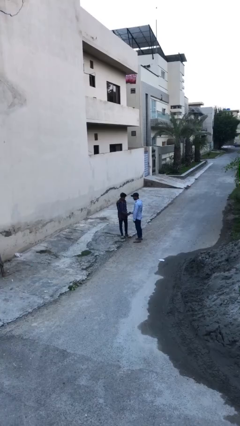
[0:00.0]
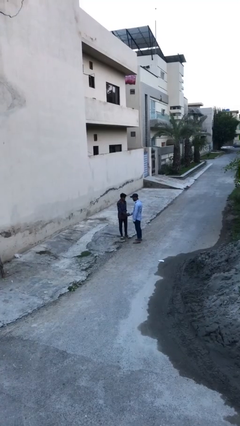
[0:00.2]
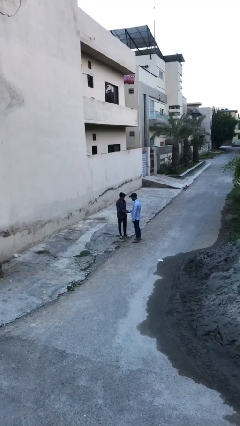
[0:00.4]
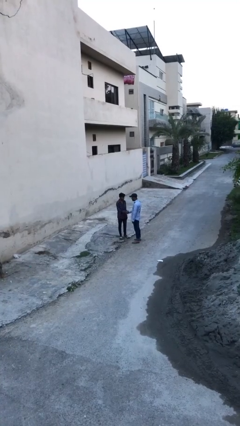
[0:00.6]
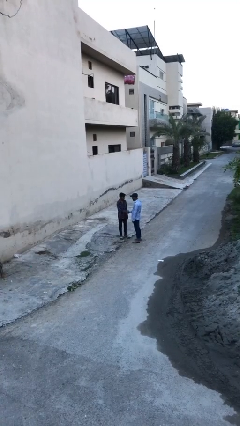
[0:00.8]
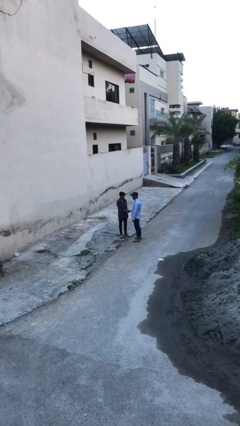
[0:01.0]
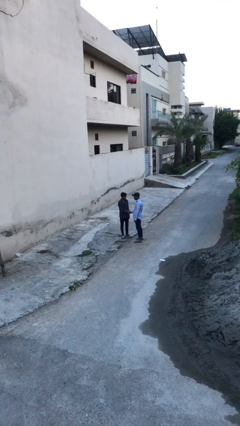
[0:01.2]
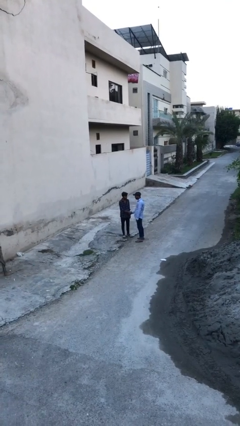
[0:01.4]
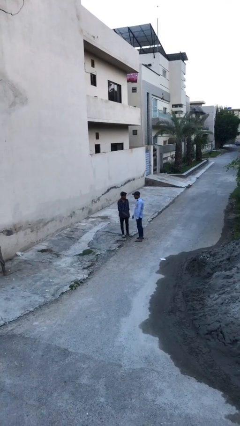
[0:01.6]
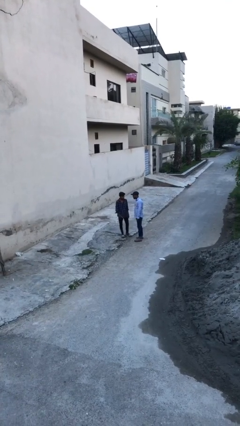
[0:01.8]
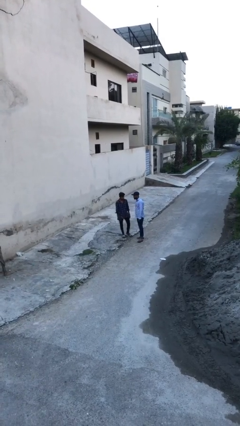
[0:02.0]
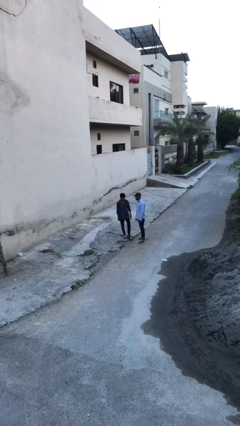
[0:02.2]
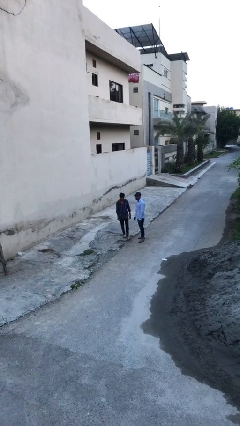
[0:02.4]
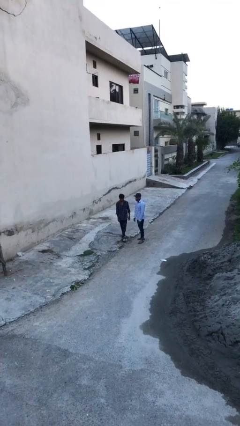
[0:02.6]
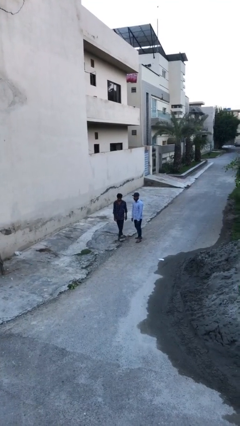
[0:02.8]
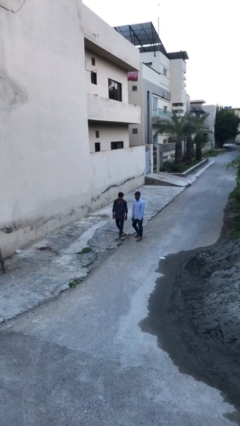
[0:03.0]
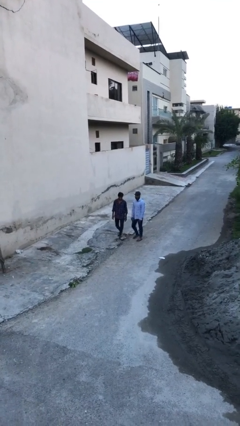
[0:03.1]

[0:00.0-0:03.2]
person shakes hand

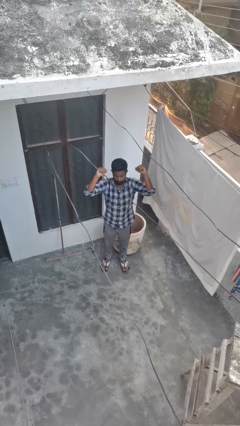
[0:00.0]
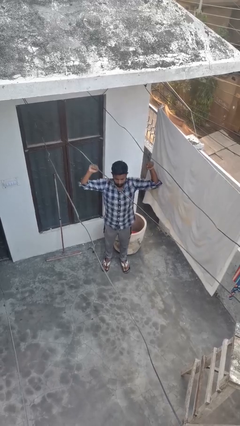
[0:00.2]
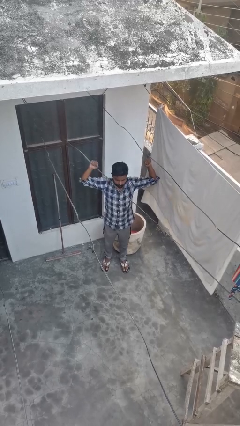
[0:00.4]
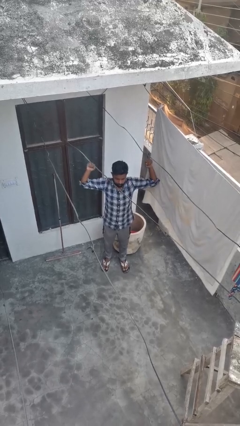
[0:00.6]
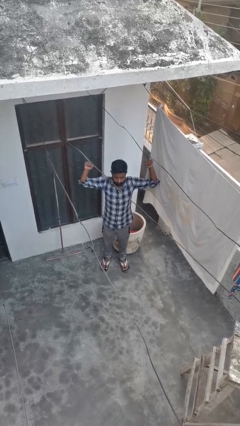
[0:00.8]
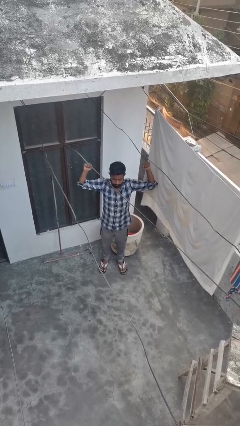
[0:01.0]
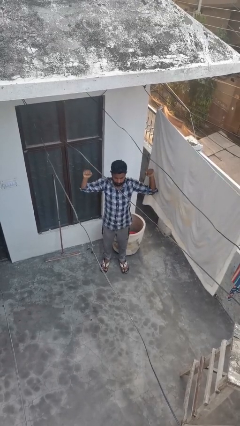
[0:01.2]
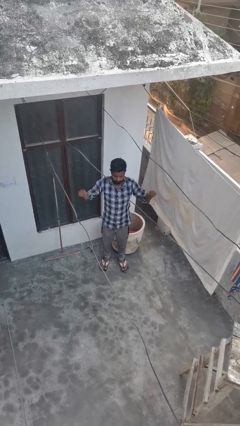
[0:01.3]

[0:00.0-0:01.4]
person gestures zoom out

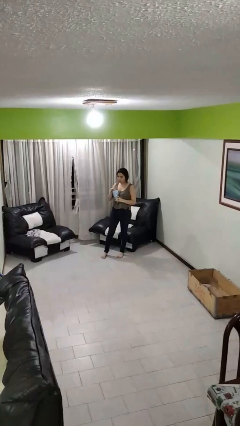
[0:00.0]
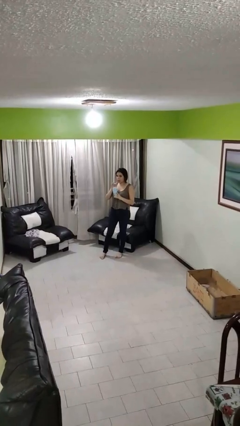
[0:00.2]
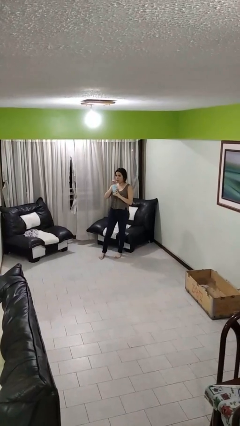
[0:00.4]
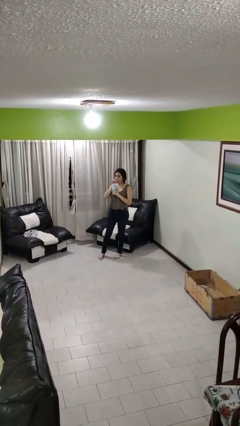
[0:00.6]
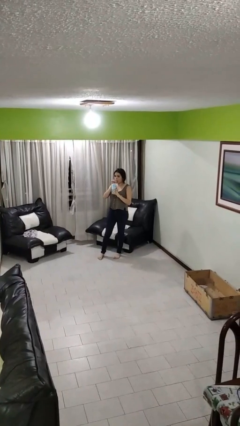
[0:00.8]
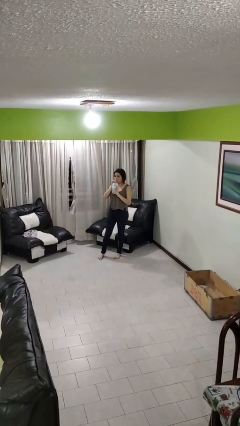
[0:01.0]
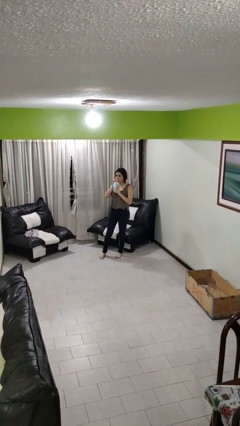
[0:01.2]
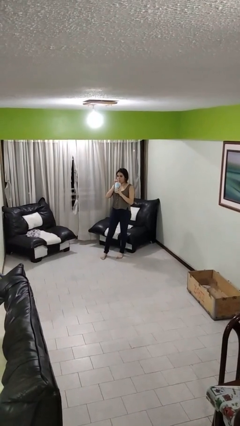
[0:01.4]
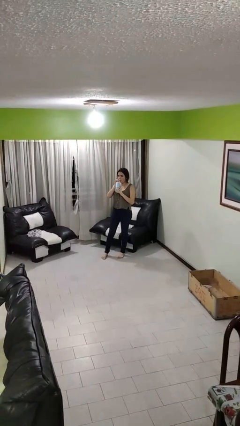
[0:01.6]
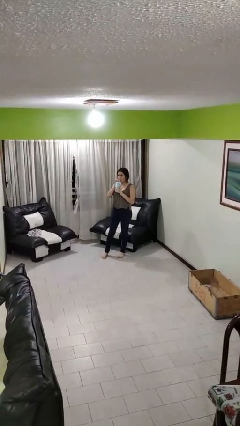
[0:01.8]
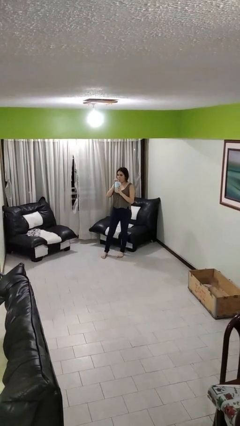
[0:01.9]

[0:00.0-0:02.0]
person drinks from straw

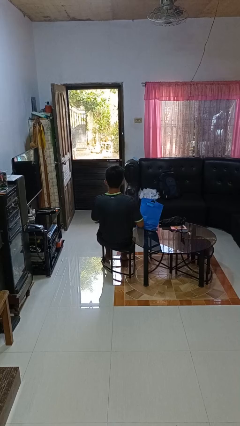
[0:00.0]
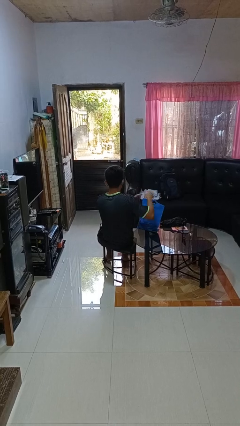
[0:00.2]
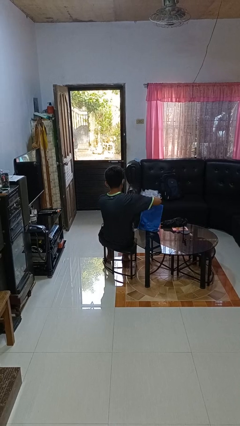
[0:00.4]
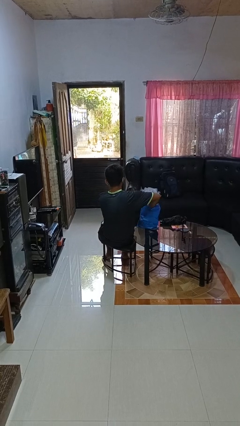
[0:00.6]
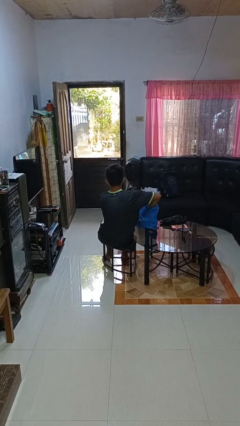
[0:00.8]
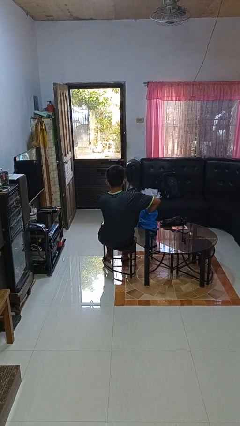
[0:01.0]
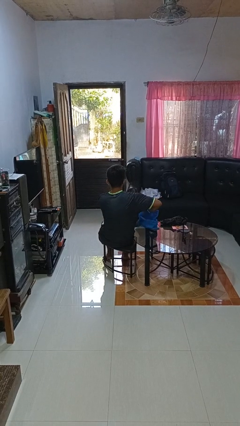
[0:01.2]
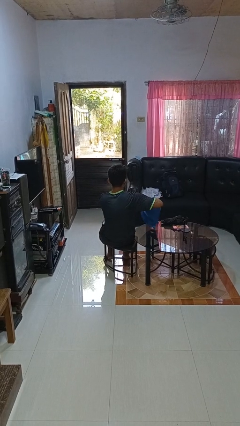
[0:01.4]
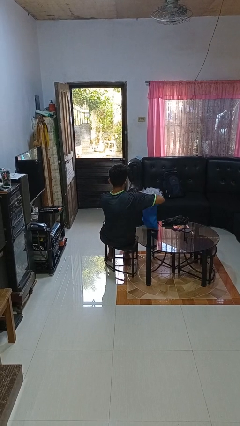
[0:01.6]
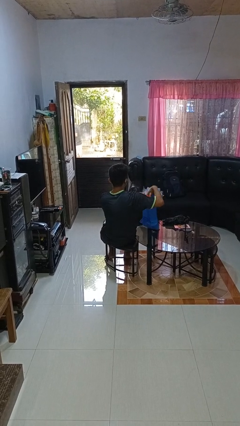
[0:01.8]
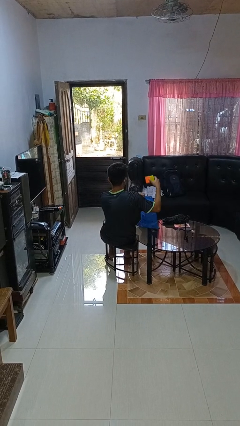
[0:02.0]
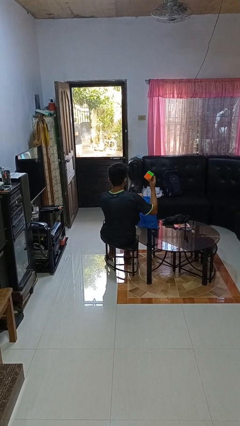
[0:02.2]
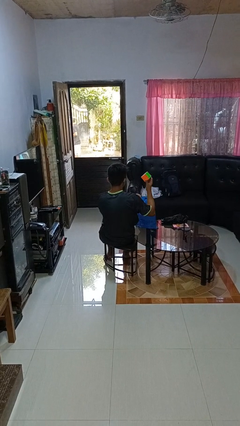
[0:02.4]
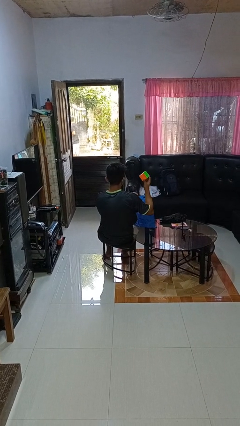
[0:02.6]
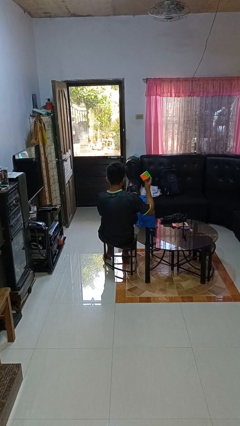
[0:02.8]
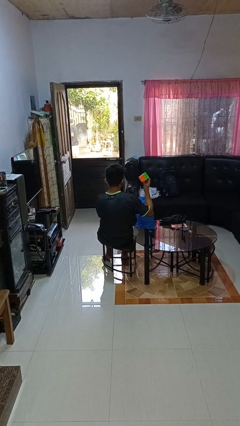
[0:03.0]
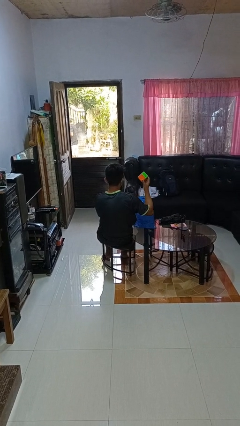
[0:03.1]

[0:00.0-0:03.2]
person takes object from bag

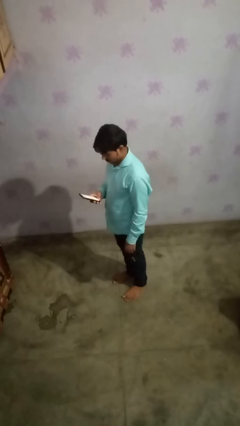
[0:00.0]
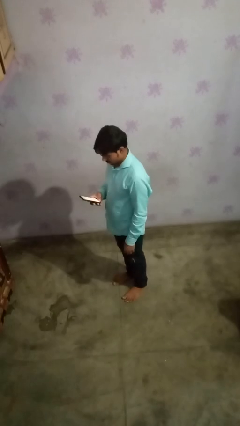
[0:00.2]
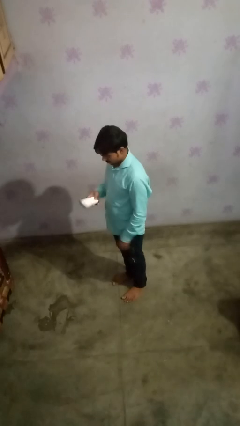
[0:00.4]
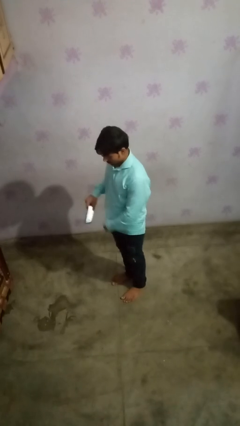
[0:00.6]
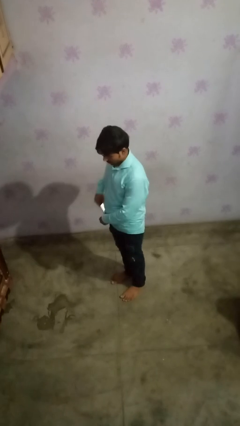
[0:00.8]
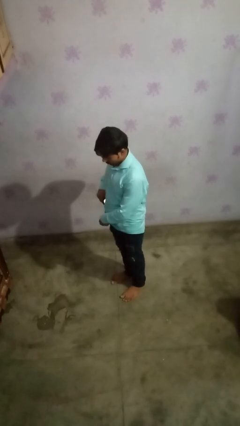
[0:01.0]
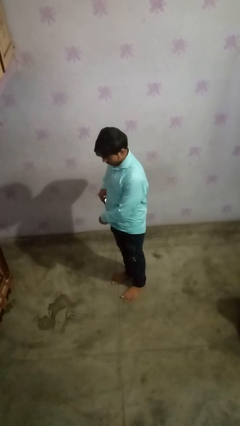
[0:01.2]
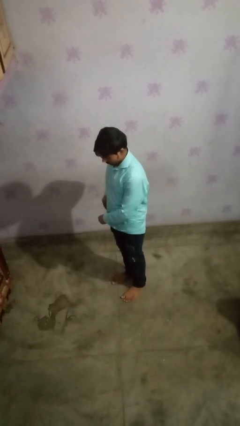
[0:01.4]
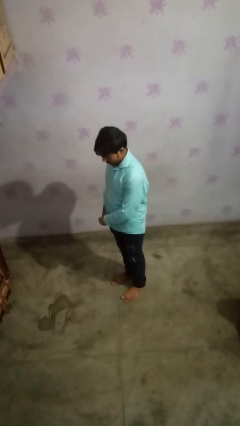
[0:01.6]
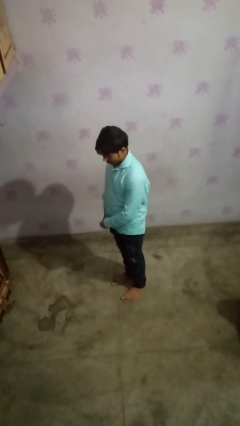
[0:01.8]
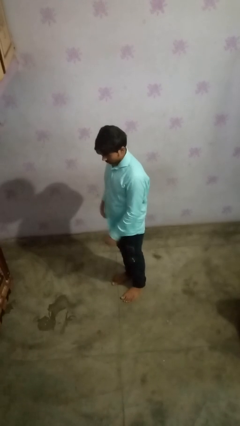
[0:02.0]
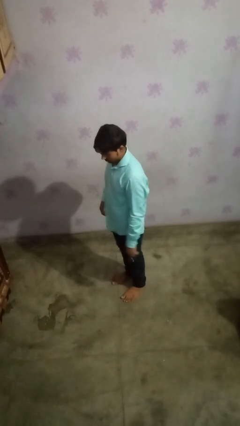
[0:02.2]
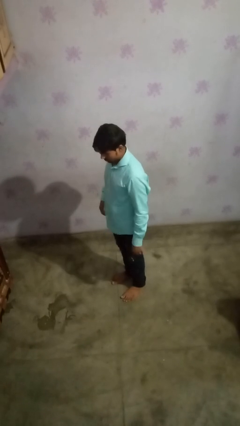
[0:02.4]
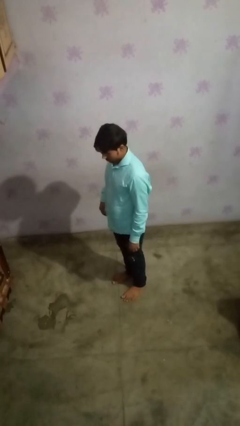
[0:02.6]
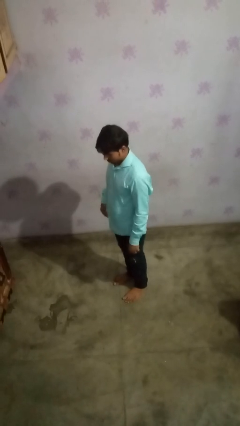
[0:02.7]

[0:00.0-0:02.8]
person puts phone into pocket

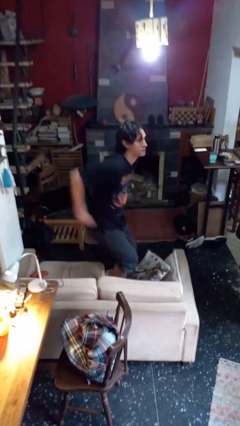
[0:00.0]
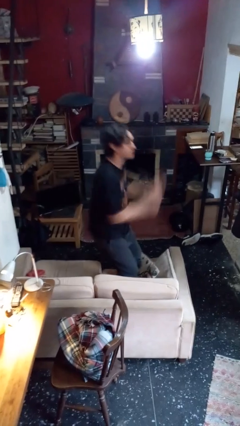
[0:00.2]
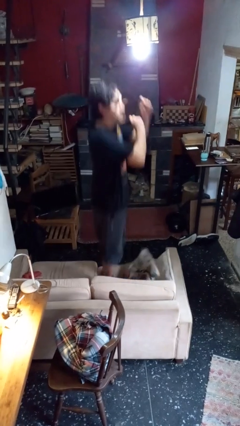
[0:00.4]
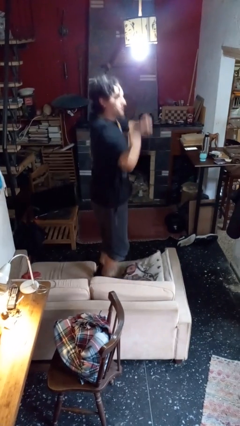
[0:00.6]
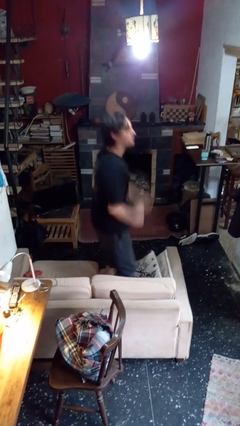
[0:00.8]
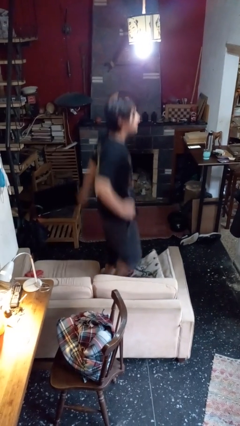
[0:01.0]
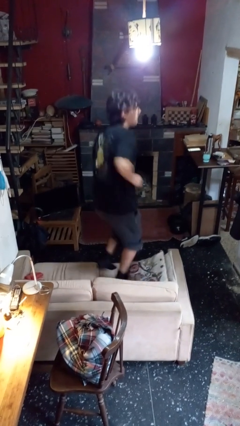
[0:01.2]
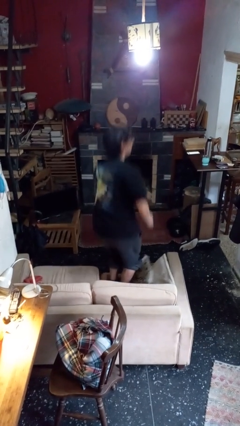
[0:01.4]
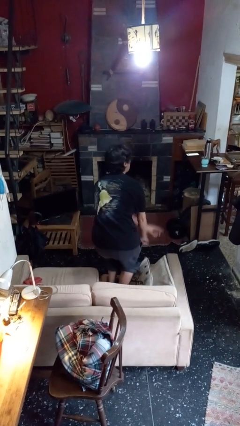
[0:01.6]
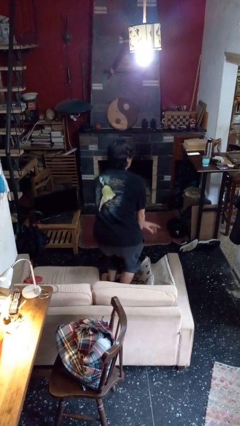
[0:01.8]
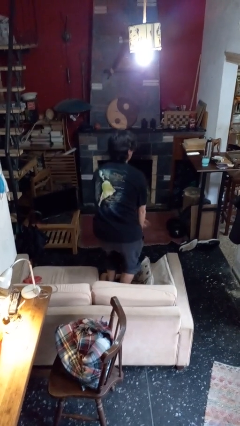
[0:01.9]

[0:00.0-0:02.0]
person jumps on couch

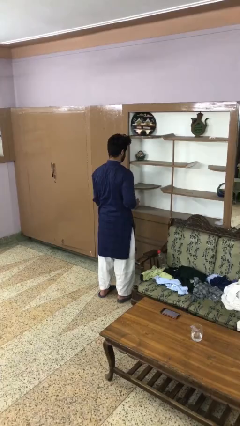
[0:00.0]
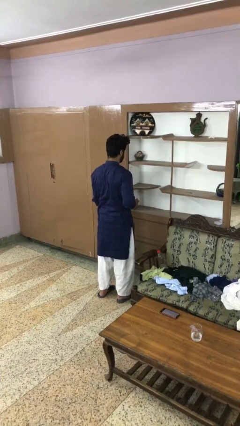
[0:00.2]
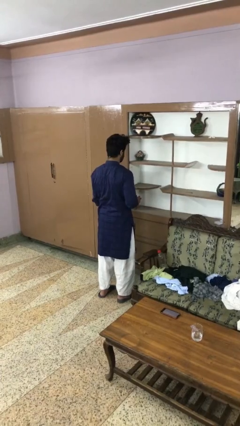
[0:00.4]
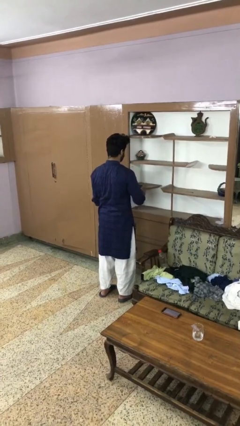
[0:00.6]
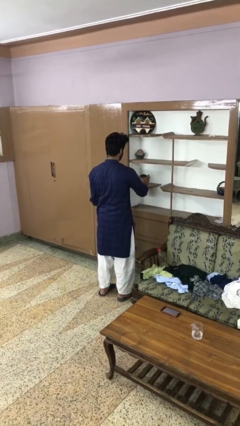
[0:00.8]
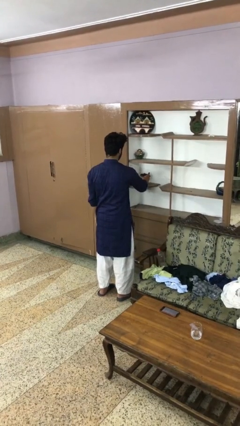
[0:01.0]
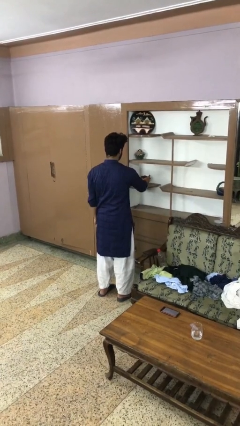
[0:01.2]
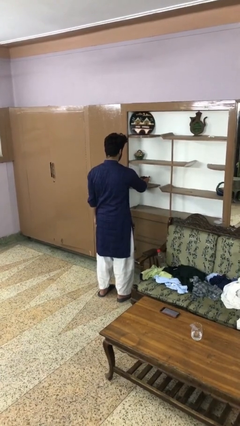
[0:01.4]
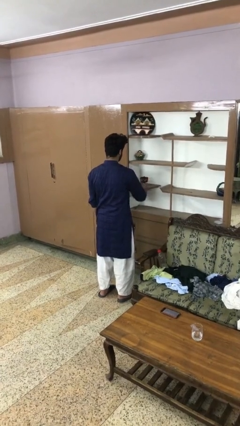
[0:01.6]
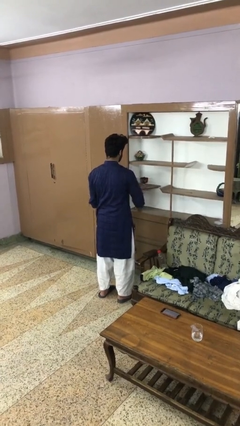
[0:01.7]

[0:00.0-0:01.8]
person puts down object on shelf

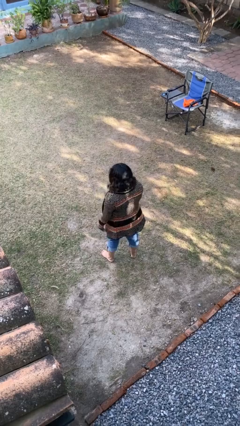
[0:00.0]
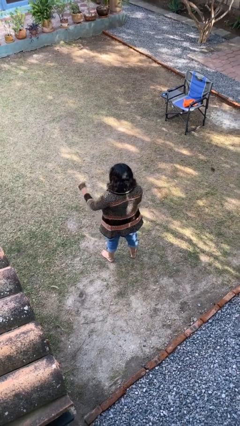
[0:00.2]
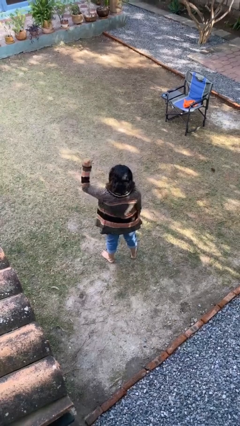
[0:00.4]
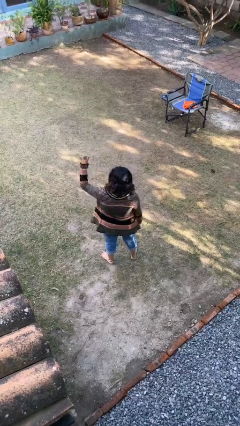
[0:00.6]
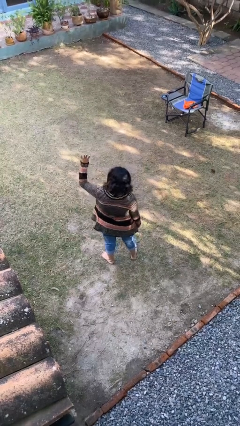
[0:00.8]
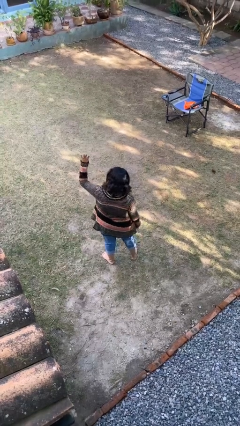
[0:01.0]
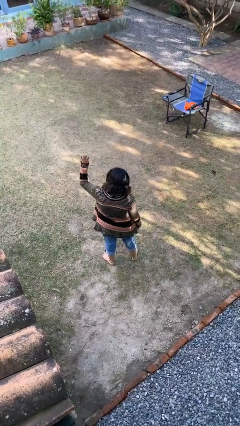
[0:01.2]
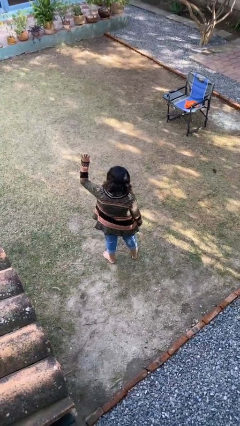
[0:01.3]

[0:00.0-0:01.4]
person gestures number four
